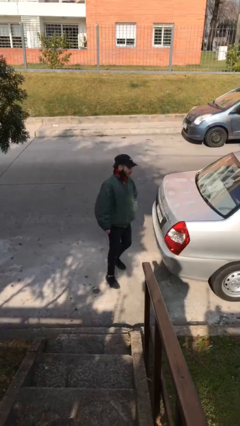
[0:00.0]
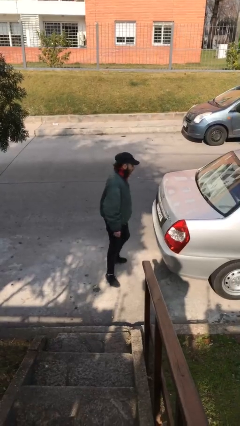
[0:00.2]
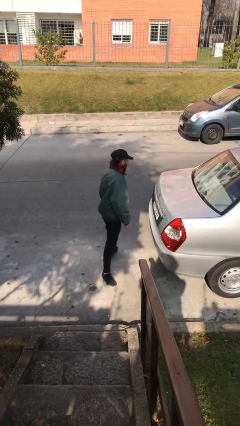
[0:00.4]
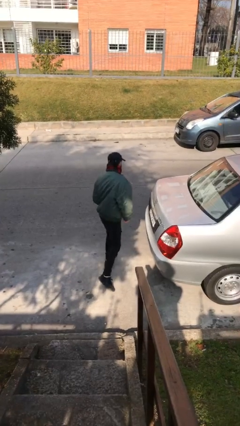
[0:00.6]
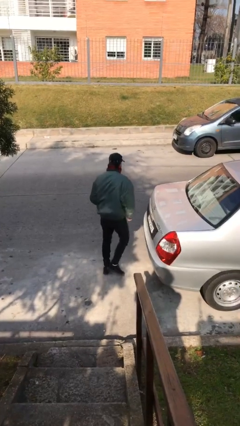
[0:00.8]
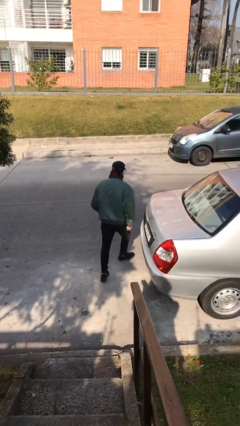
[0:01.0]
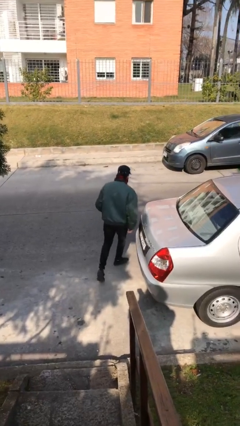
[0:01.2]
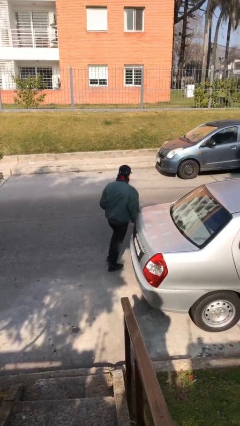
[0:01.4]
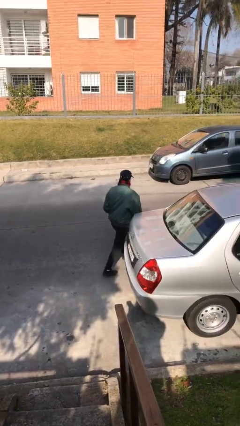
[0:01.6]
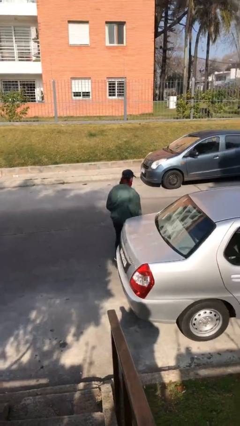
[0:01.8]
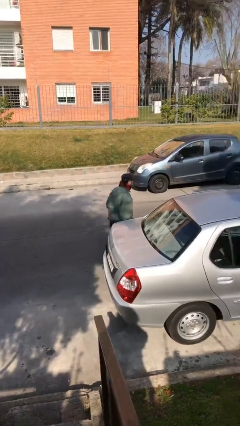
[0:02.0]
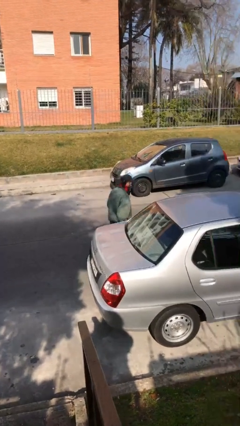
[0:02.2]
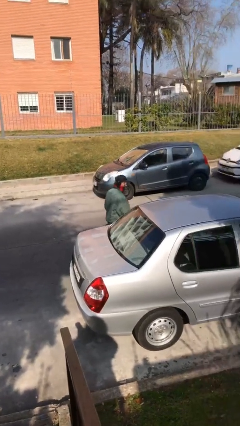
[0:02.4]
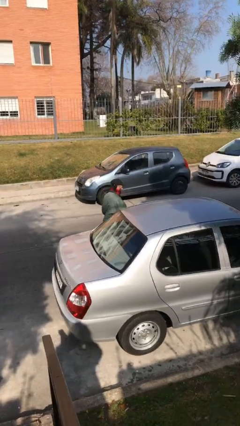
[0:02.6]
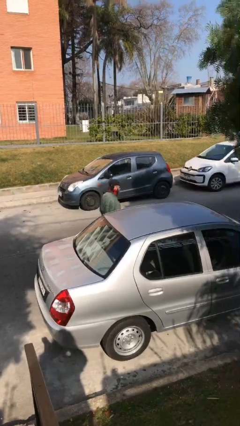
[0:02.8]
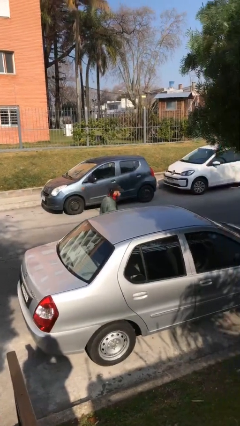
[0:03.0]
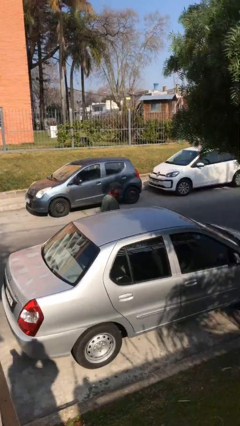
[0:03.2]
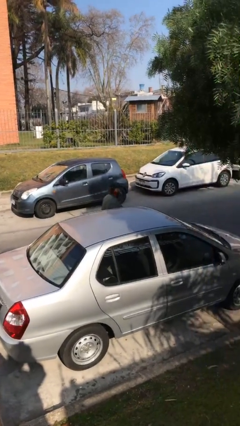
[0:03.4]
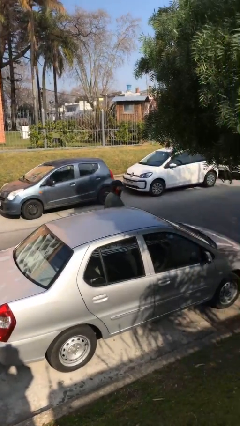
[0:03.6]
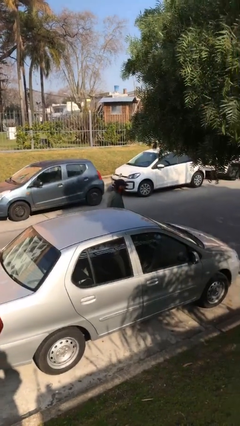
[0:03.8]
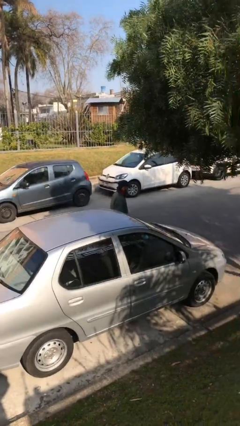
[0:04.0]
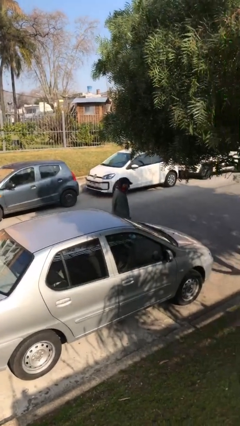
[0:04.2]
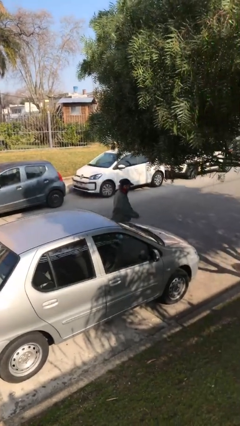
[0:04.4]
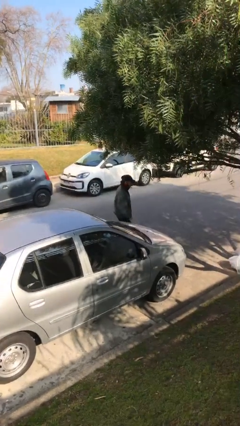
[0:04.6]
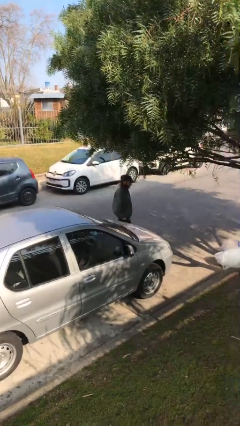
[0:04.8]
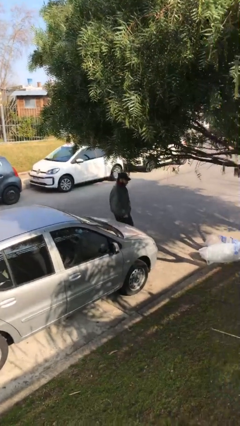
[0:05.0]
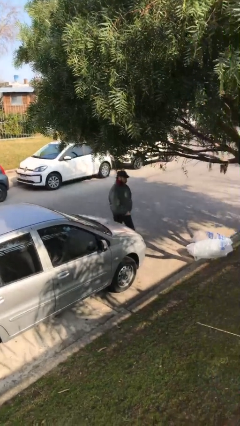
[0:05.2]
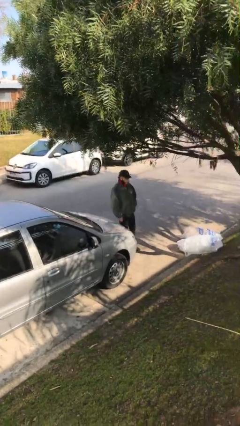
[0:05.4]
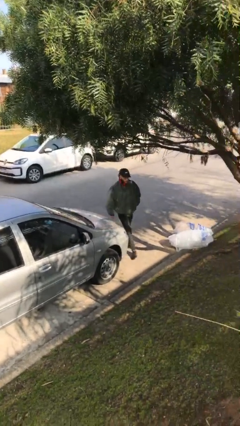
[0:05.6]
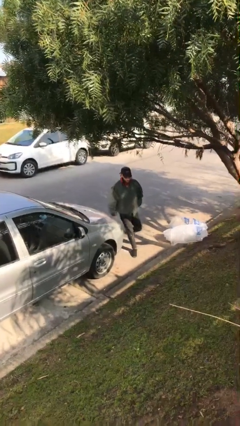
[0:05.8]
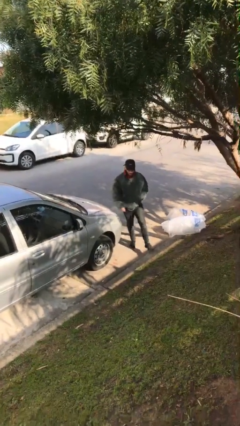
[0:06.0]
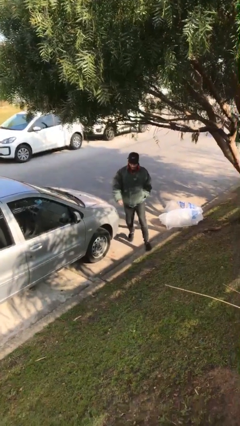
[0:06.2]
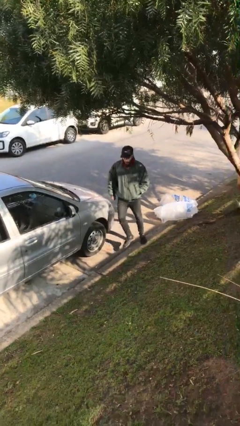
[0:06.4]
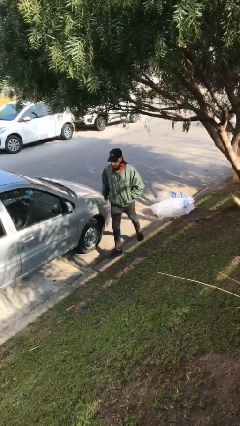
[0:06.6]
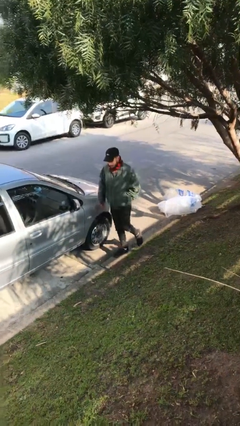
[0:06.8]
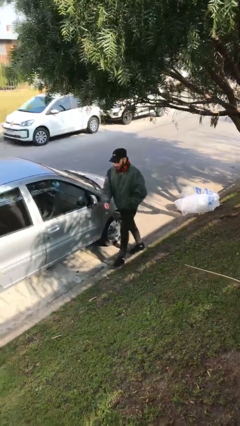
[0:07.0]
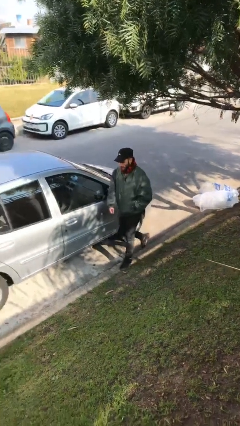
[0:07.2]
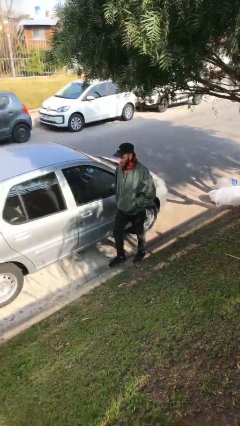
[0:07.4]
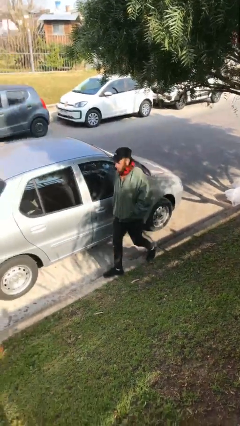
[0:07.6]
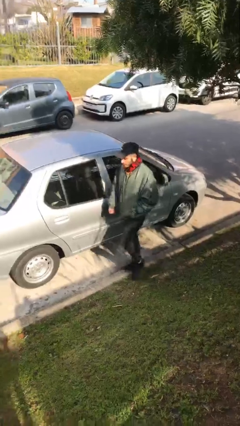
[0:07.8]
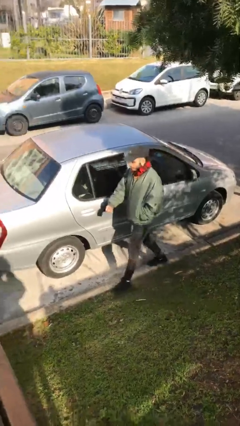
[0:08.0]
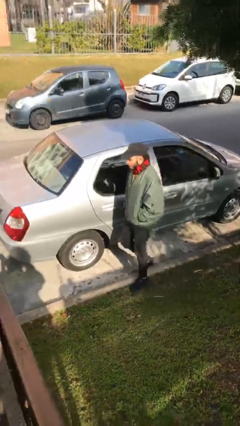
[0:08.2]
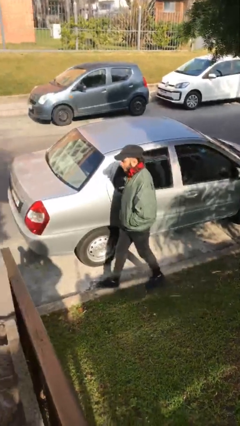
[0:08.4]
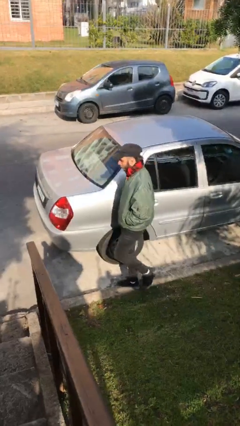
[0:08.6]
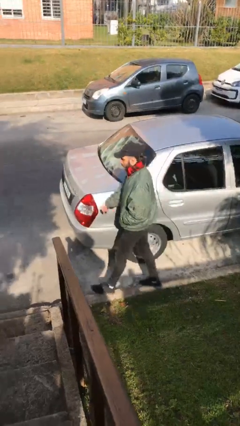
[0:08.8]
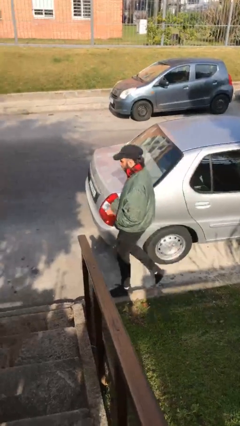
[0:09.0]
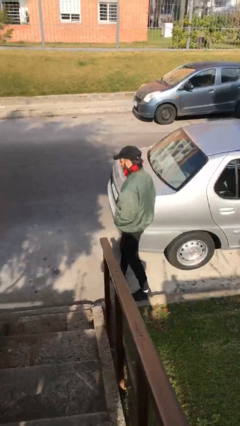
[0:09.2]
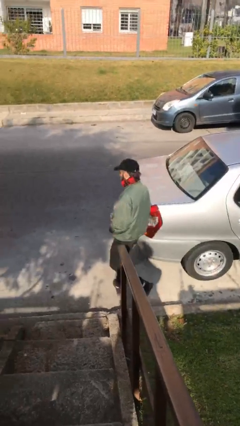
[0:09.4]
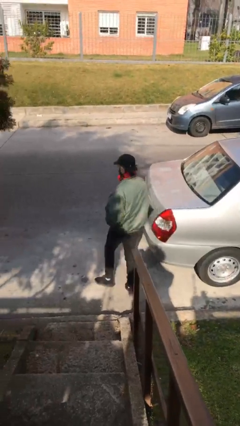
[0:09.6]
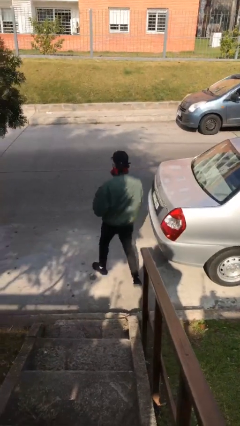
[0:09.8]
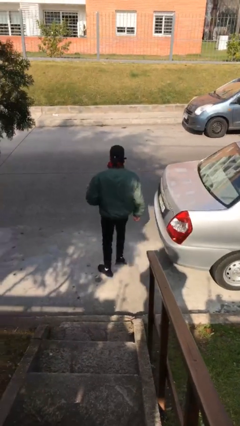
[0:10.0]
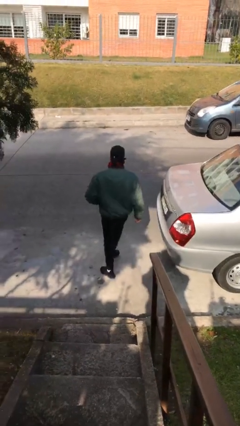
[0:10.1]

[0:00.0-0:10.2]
person walks around car

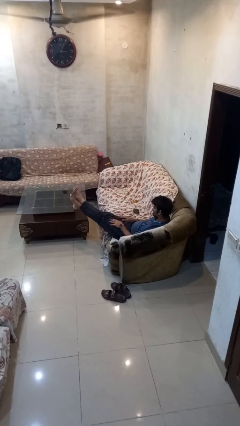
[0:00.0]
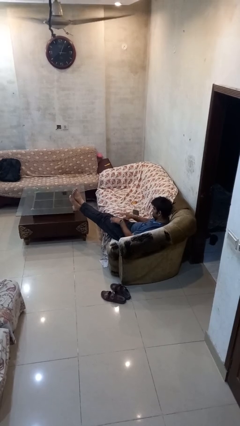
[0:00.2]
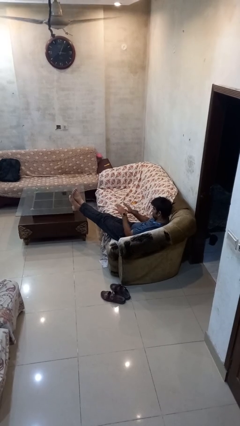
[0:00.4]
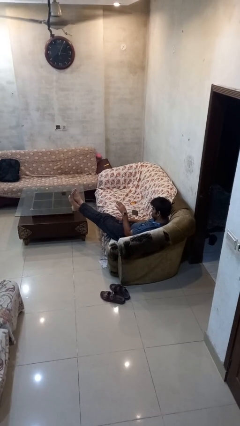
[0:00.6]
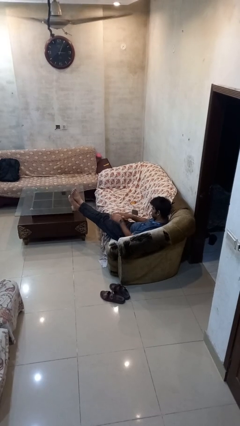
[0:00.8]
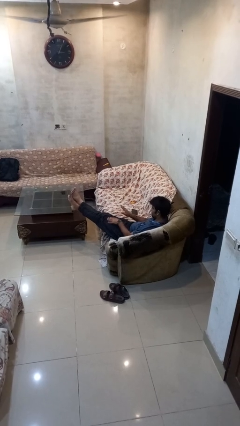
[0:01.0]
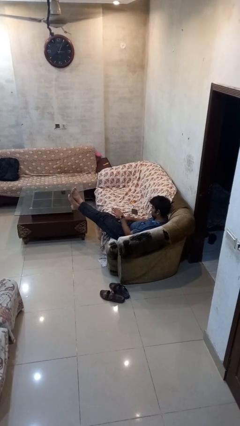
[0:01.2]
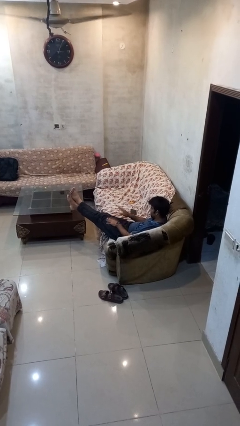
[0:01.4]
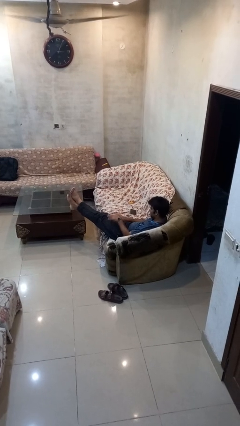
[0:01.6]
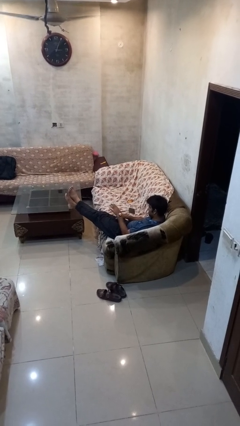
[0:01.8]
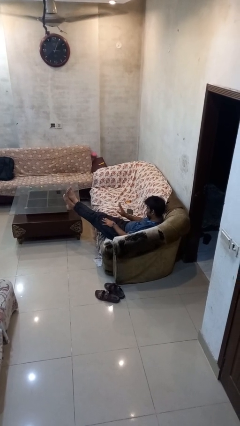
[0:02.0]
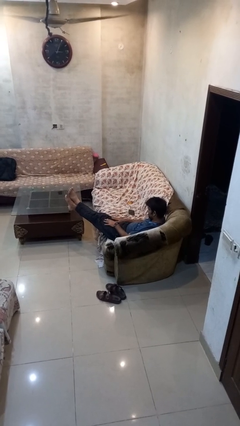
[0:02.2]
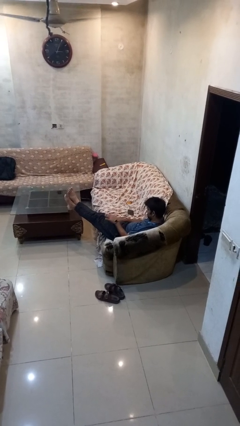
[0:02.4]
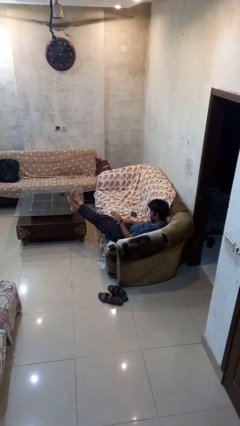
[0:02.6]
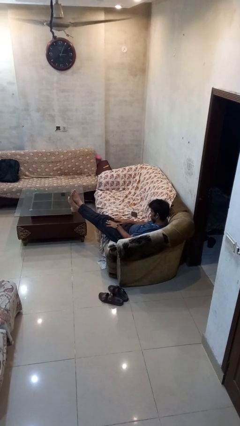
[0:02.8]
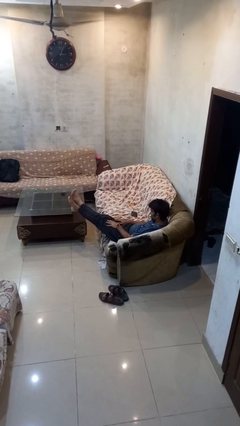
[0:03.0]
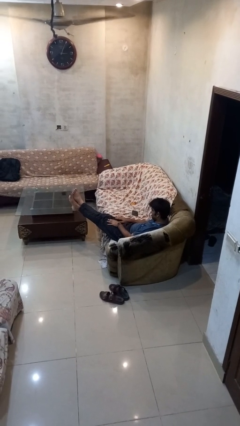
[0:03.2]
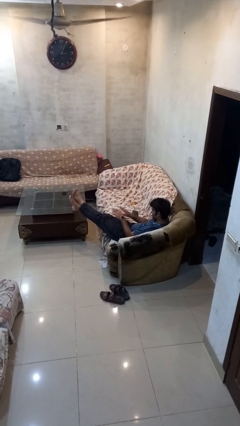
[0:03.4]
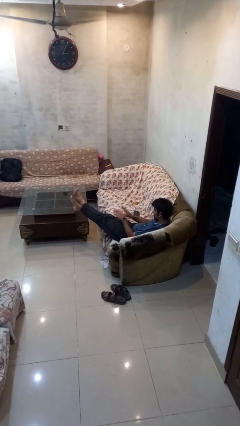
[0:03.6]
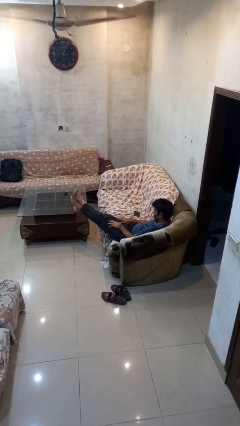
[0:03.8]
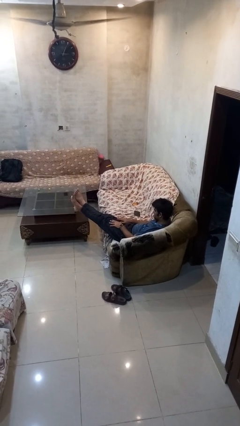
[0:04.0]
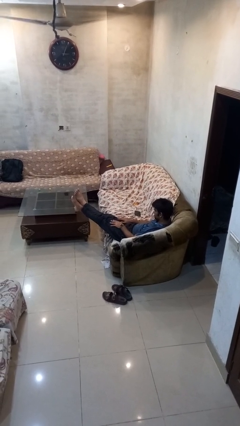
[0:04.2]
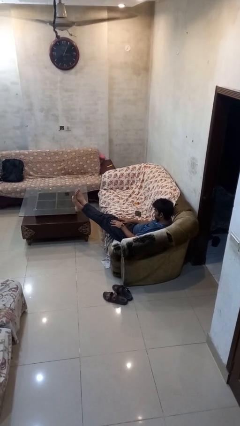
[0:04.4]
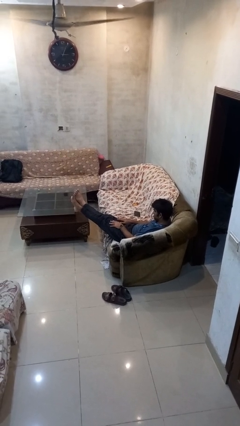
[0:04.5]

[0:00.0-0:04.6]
person slaps hands on thighs

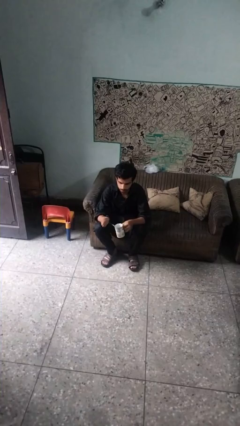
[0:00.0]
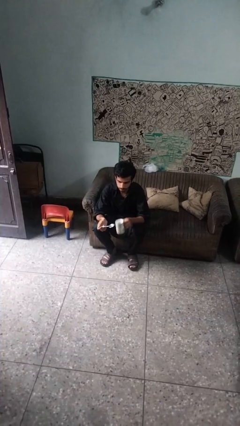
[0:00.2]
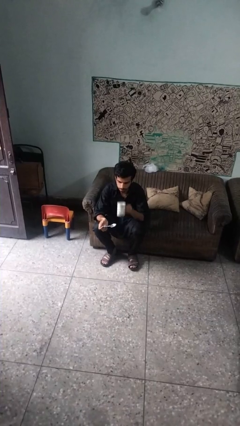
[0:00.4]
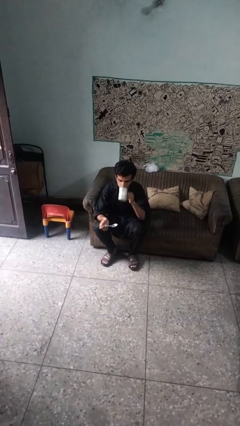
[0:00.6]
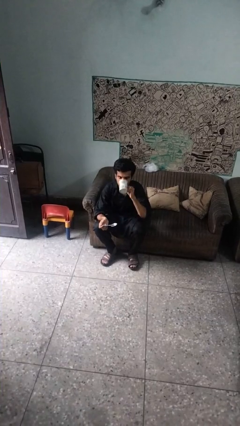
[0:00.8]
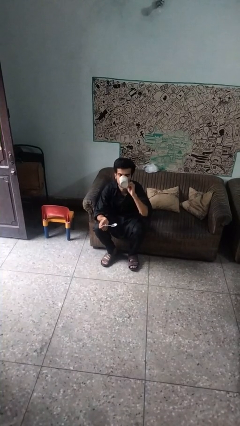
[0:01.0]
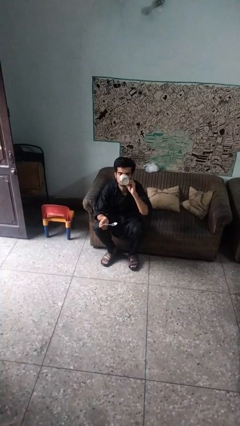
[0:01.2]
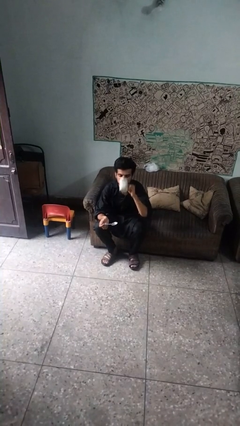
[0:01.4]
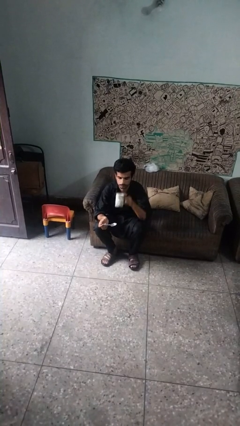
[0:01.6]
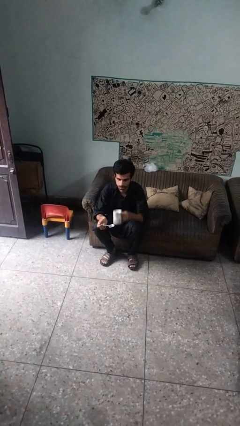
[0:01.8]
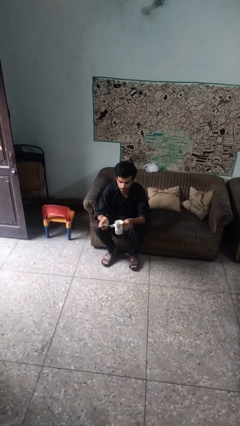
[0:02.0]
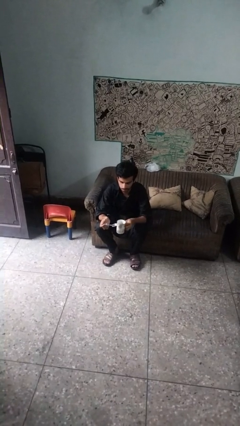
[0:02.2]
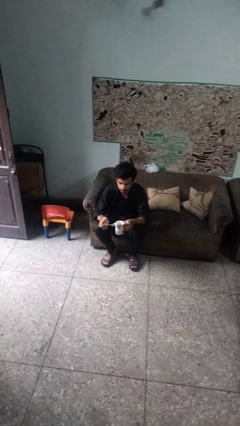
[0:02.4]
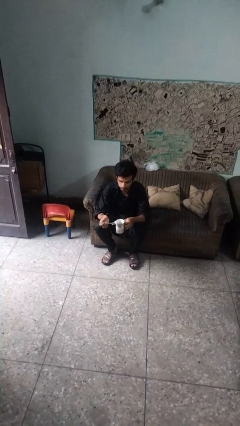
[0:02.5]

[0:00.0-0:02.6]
person drinks from mug

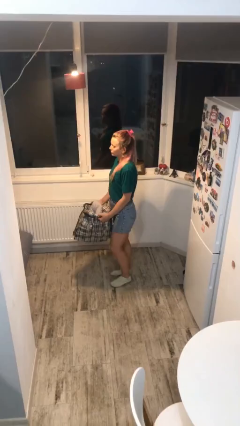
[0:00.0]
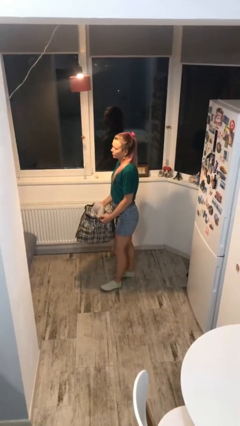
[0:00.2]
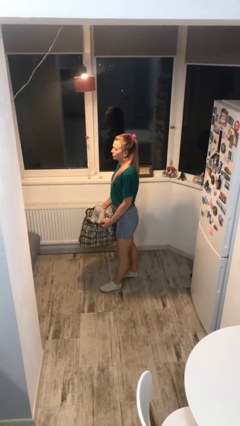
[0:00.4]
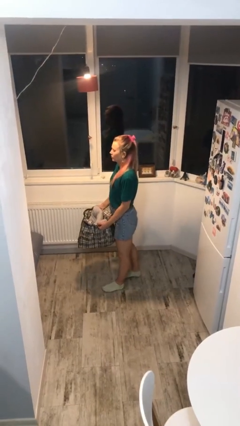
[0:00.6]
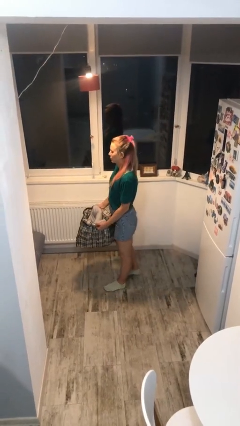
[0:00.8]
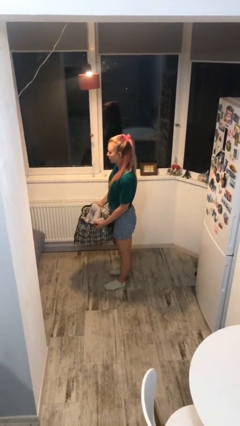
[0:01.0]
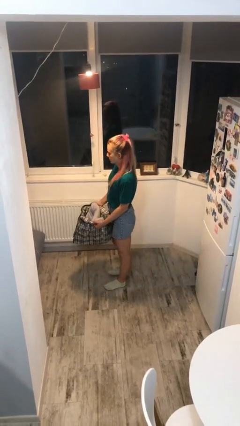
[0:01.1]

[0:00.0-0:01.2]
person carries laundry basket
